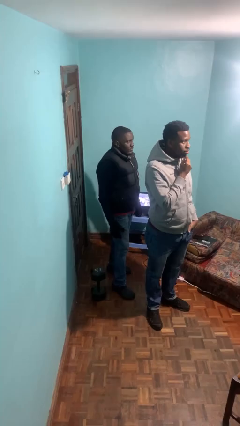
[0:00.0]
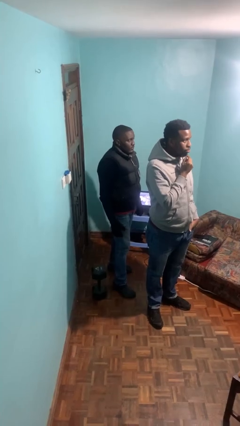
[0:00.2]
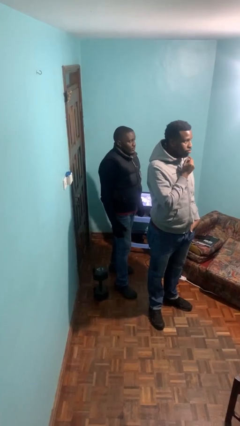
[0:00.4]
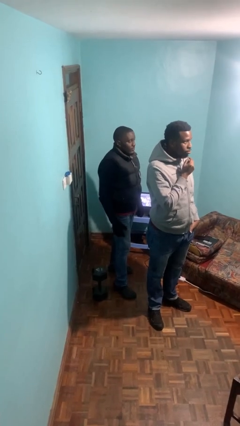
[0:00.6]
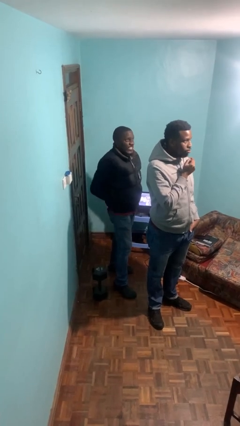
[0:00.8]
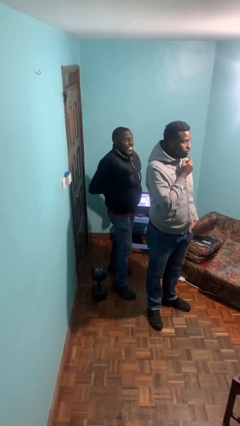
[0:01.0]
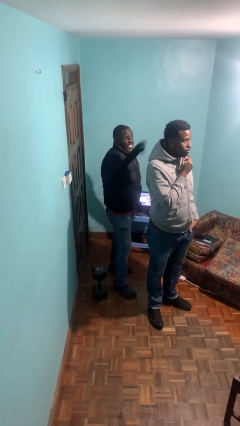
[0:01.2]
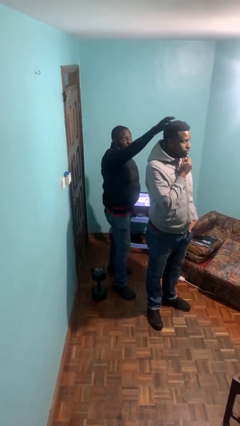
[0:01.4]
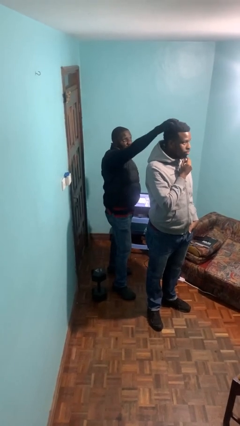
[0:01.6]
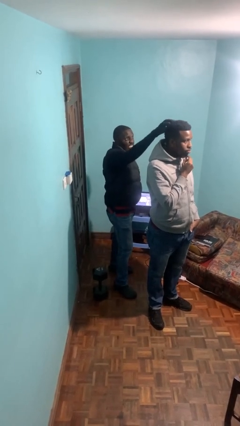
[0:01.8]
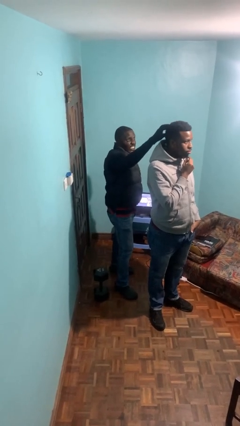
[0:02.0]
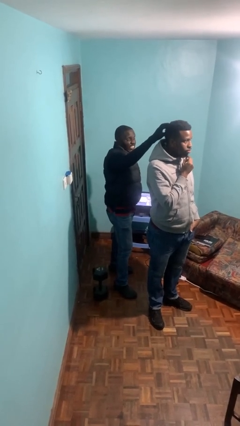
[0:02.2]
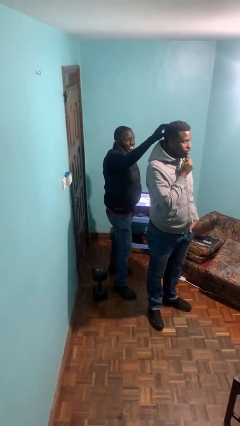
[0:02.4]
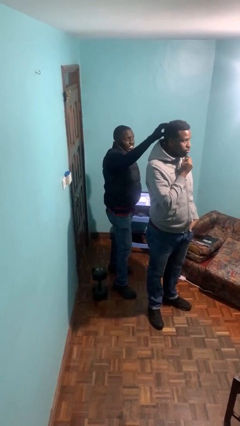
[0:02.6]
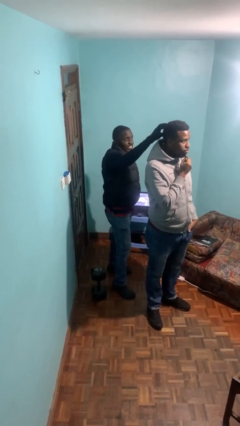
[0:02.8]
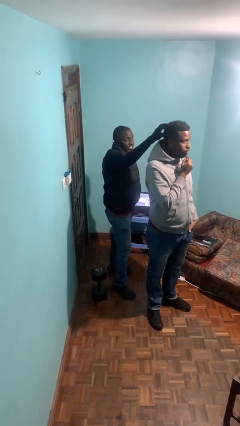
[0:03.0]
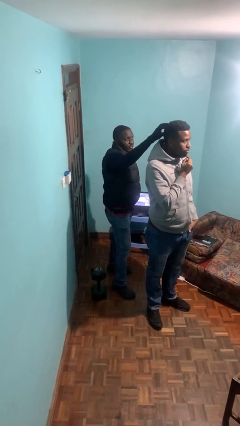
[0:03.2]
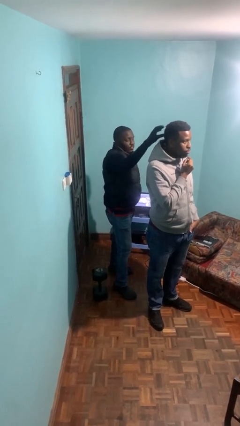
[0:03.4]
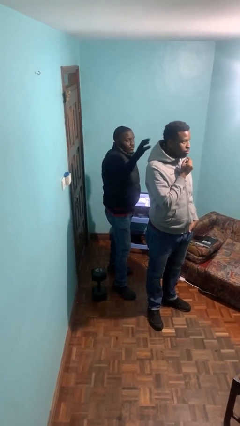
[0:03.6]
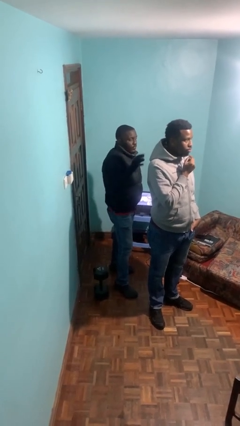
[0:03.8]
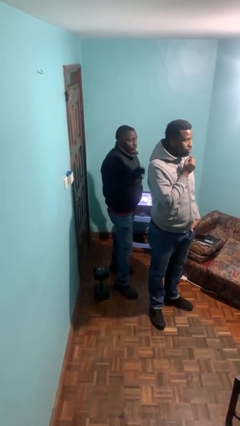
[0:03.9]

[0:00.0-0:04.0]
person grabs person by hair

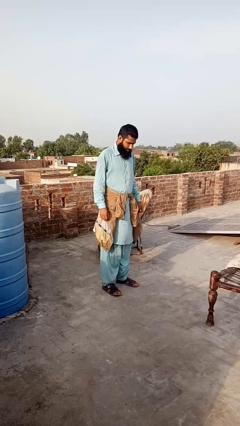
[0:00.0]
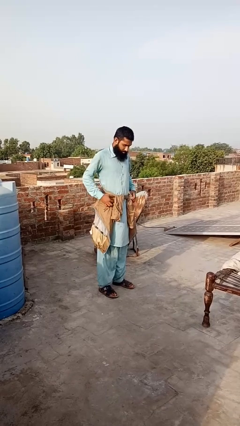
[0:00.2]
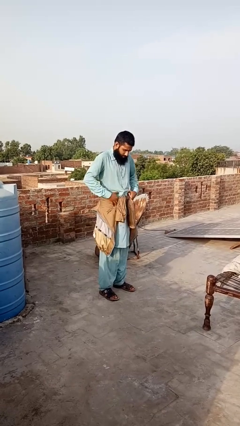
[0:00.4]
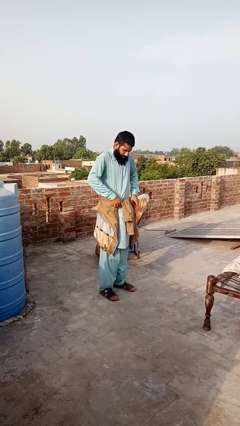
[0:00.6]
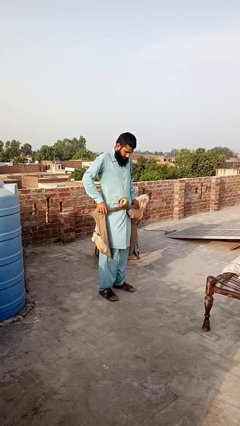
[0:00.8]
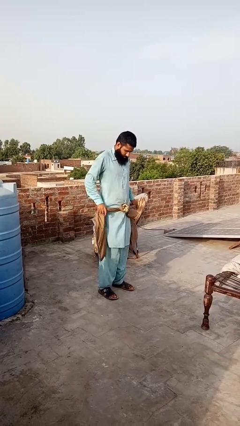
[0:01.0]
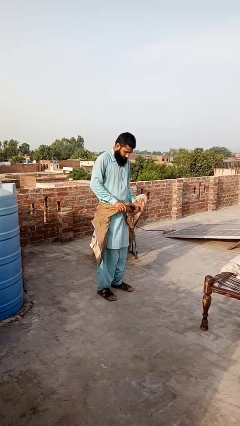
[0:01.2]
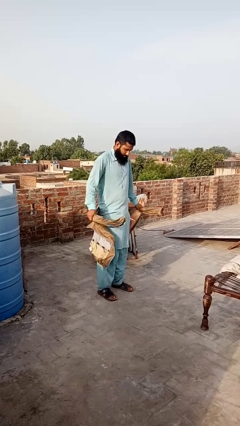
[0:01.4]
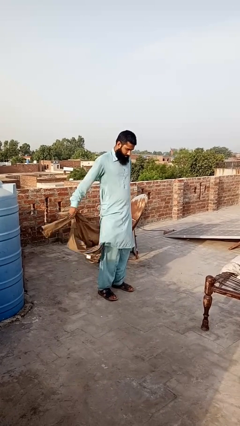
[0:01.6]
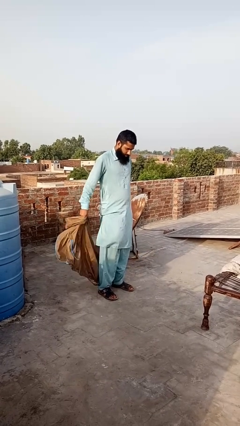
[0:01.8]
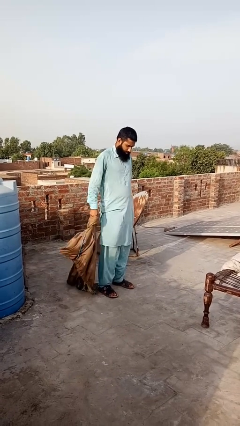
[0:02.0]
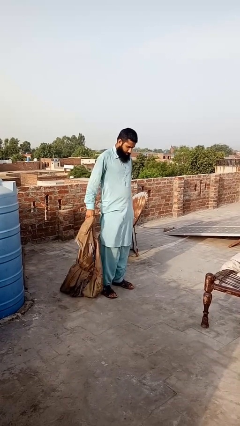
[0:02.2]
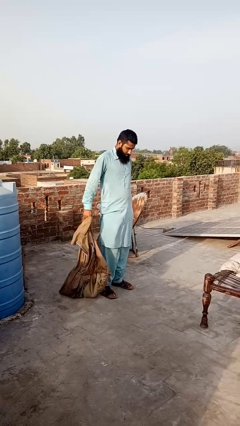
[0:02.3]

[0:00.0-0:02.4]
person unties jacket around waist

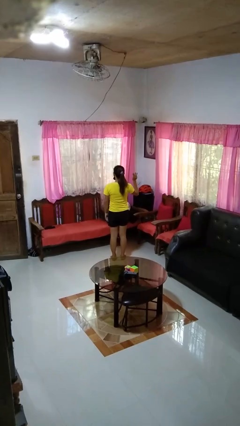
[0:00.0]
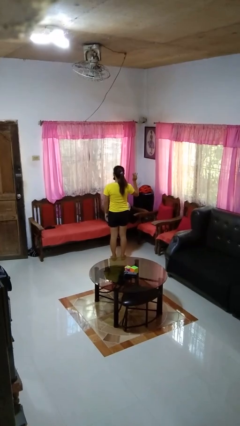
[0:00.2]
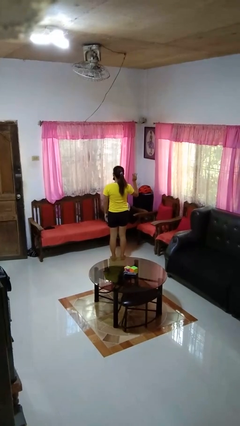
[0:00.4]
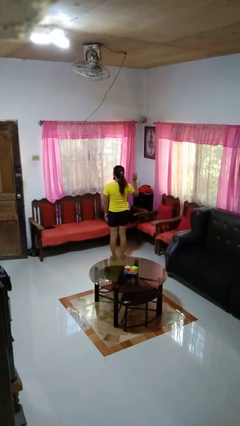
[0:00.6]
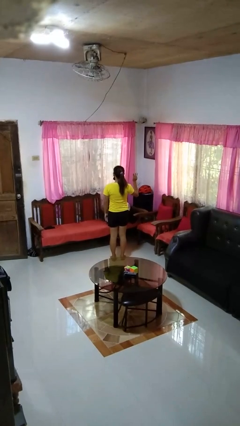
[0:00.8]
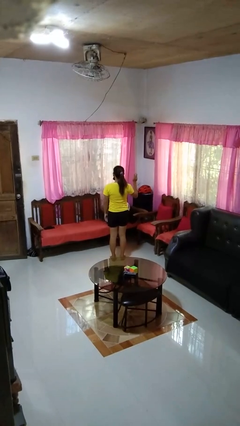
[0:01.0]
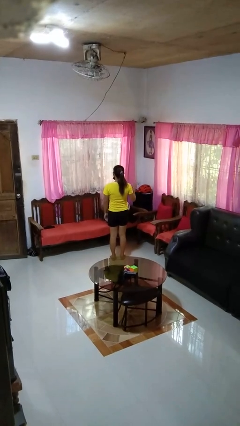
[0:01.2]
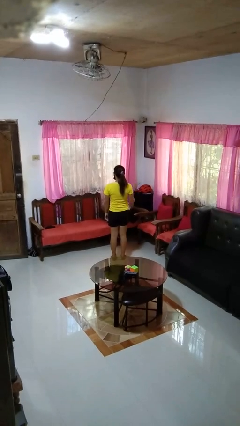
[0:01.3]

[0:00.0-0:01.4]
person gestures number three

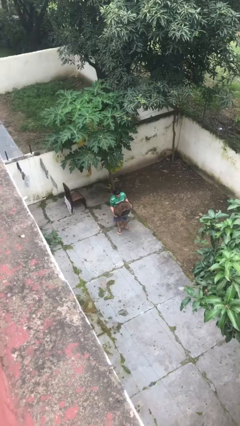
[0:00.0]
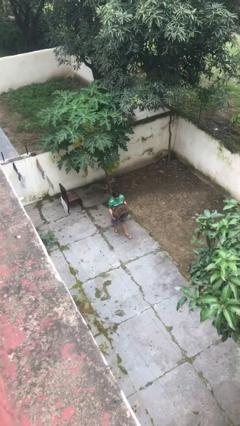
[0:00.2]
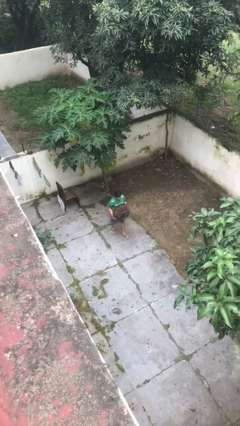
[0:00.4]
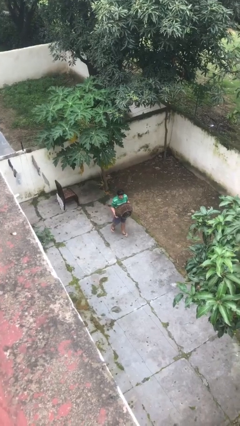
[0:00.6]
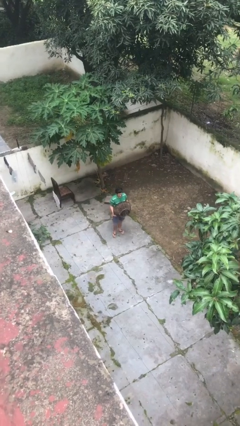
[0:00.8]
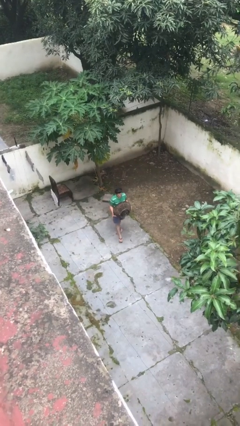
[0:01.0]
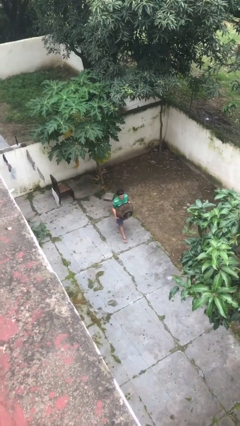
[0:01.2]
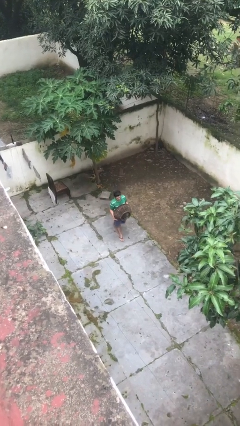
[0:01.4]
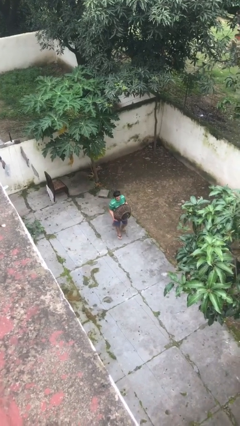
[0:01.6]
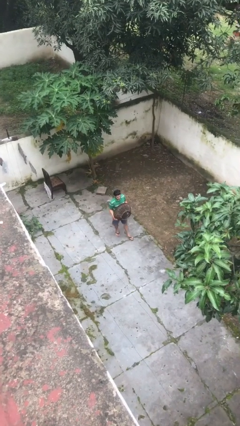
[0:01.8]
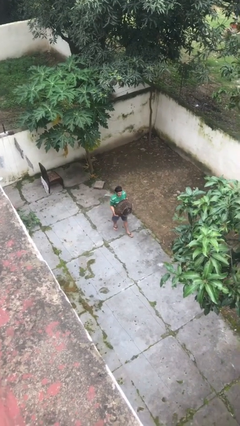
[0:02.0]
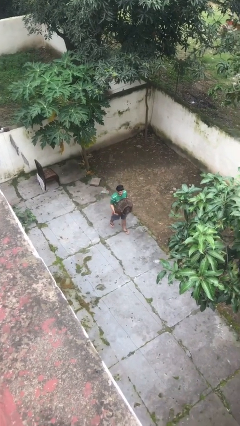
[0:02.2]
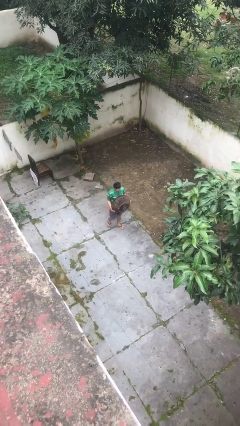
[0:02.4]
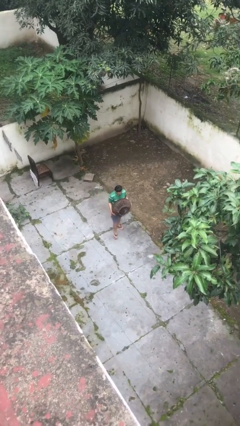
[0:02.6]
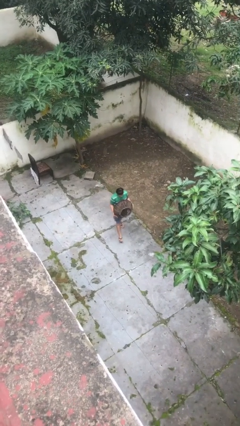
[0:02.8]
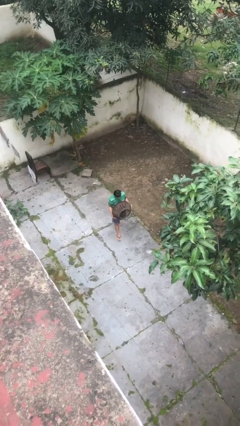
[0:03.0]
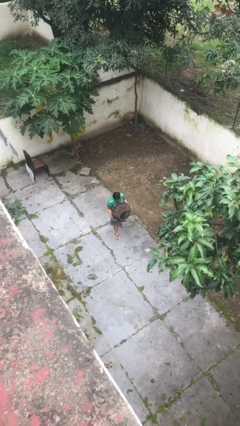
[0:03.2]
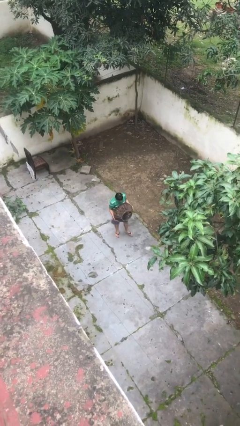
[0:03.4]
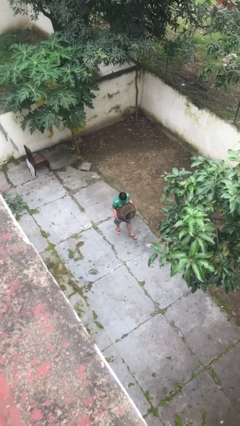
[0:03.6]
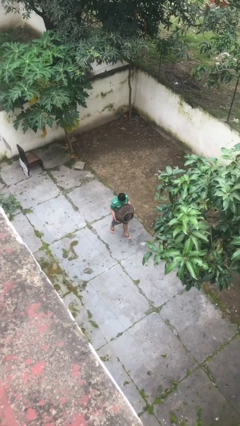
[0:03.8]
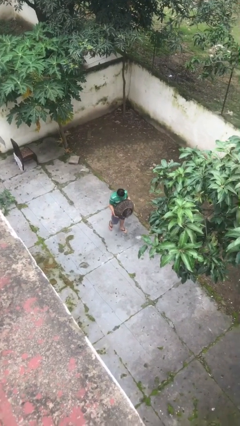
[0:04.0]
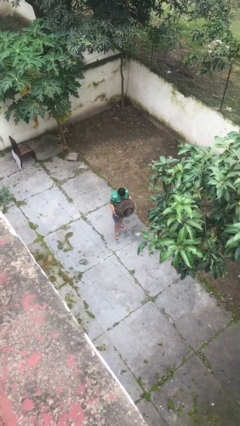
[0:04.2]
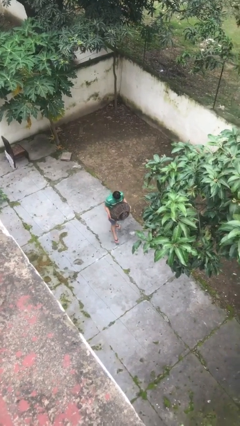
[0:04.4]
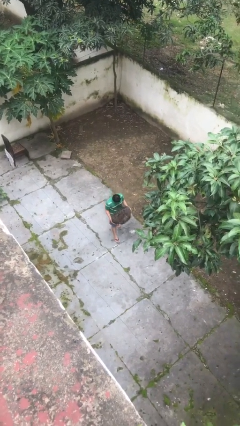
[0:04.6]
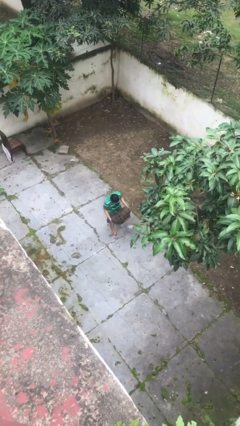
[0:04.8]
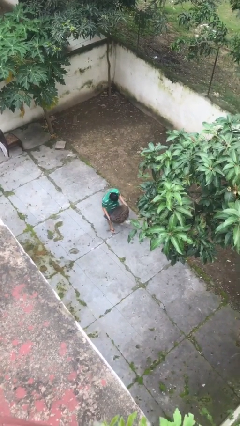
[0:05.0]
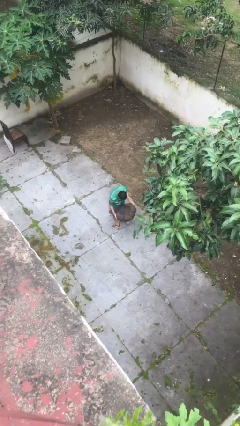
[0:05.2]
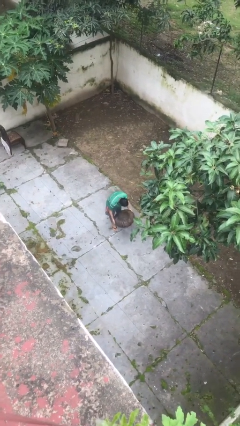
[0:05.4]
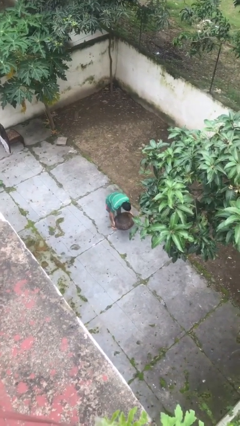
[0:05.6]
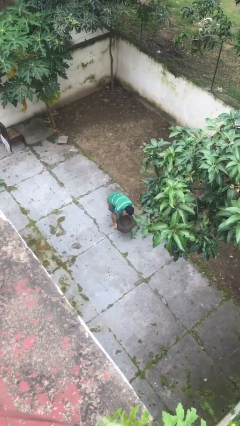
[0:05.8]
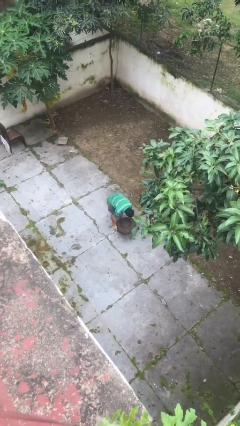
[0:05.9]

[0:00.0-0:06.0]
person carries heavy object

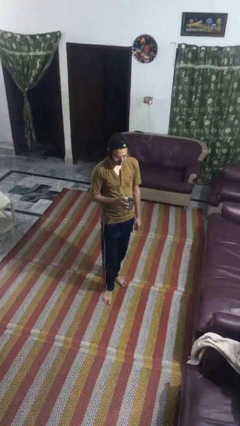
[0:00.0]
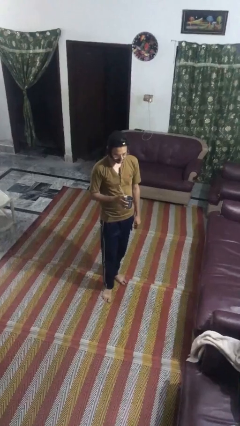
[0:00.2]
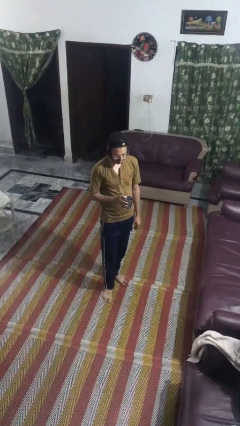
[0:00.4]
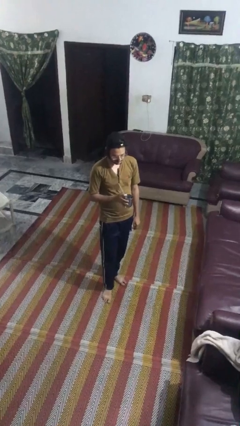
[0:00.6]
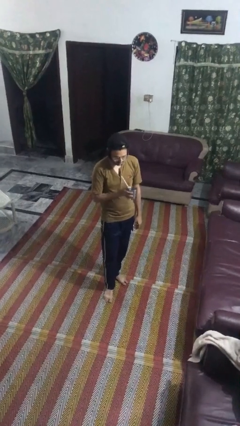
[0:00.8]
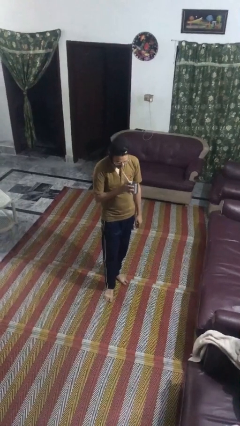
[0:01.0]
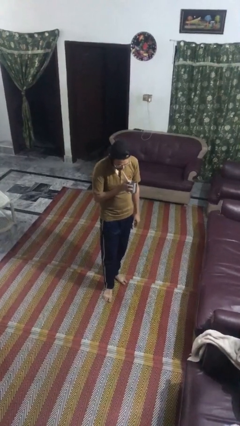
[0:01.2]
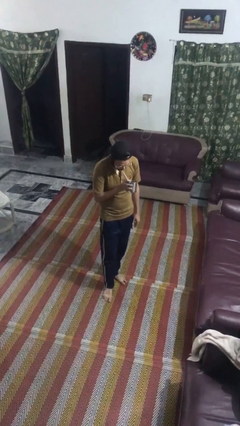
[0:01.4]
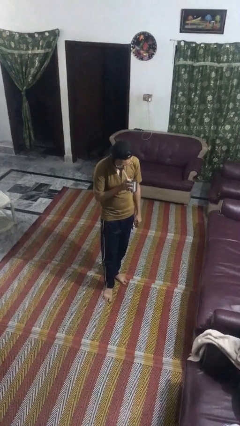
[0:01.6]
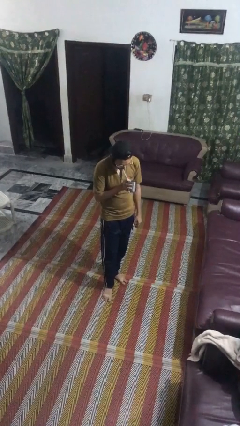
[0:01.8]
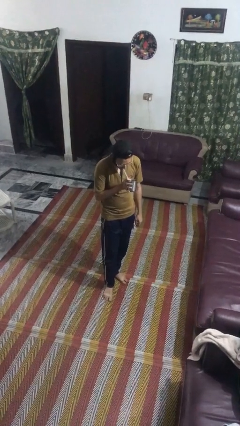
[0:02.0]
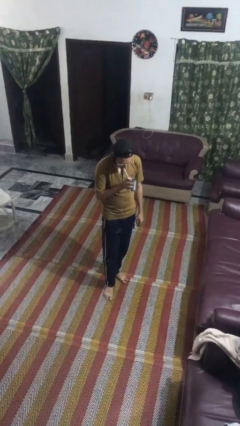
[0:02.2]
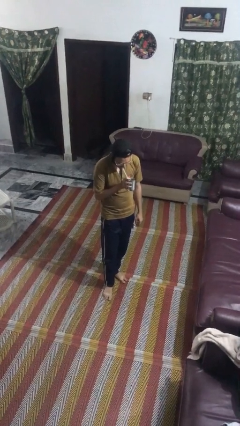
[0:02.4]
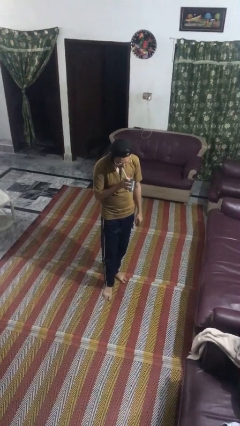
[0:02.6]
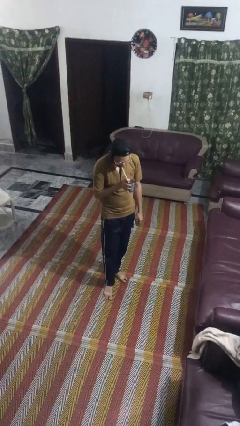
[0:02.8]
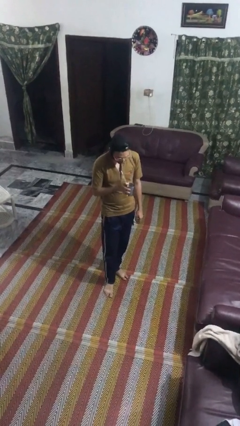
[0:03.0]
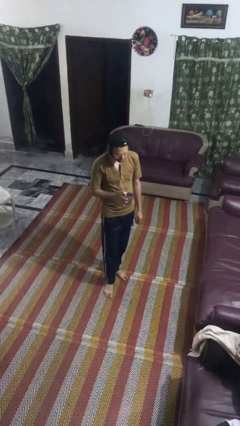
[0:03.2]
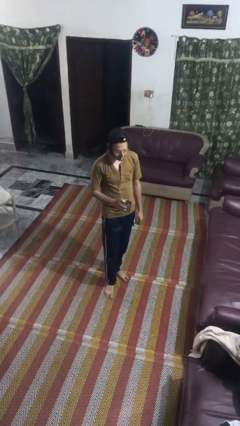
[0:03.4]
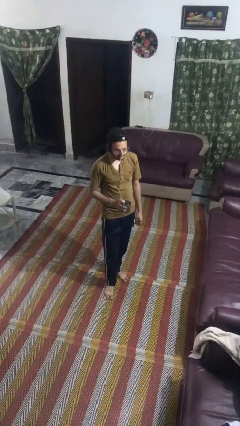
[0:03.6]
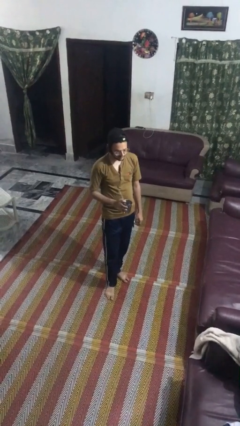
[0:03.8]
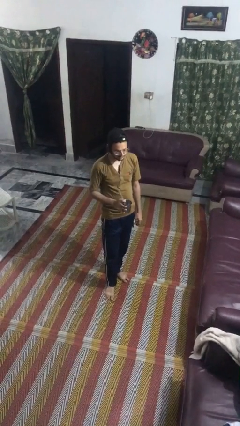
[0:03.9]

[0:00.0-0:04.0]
person drinks from straw

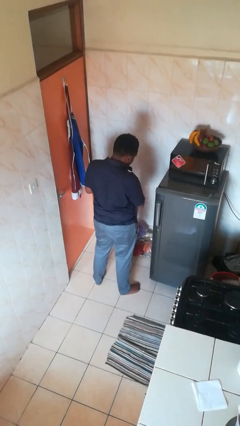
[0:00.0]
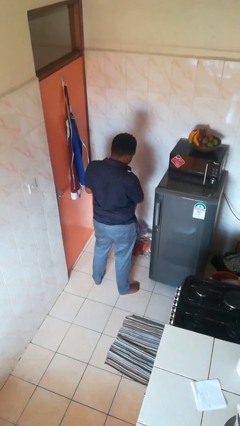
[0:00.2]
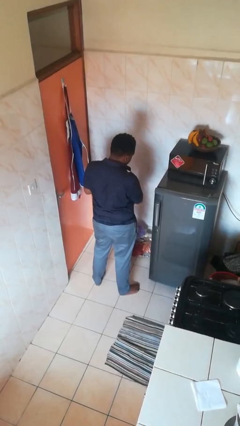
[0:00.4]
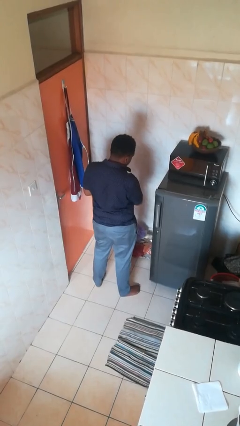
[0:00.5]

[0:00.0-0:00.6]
person puts object into bag
